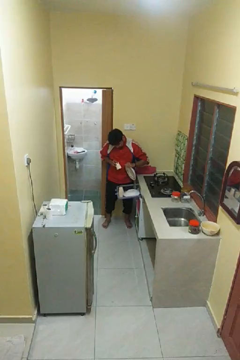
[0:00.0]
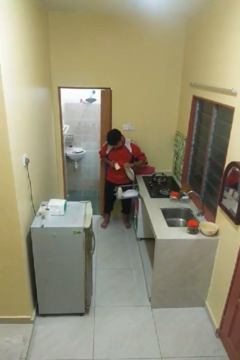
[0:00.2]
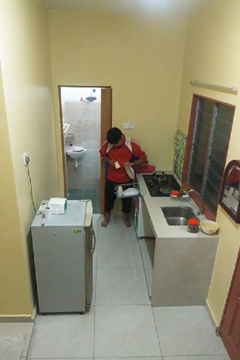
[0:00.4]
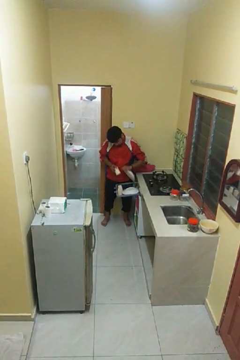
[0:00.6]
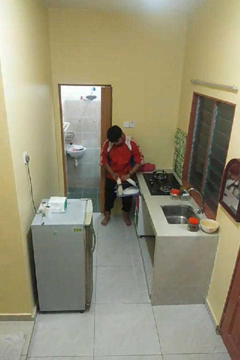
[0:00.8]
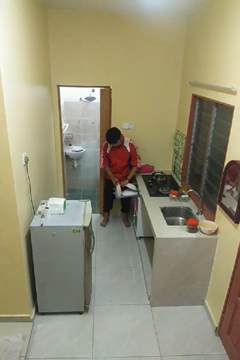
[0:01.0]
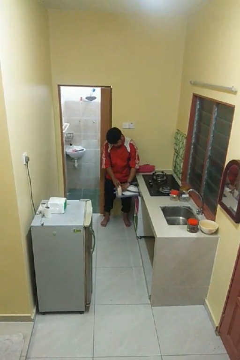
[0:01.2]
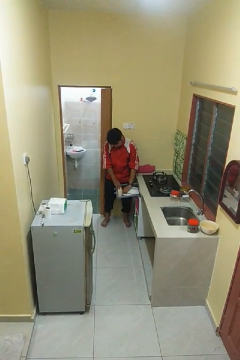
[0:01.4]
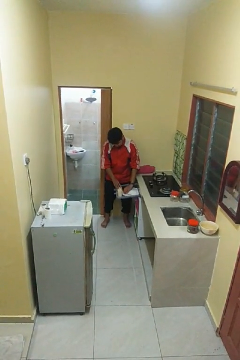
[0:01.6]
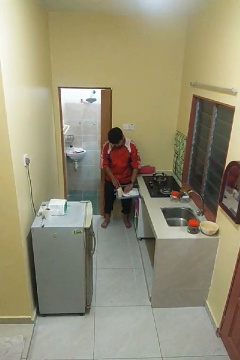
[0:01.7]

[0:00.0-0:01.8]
person puts object into kitchen drawer

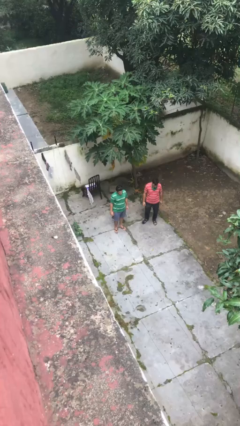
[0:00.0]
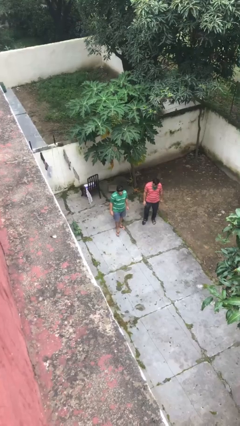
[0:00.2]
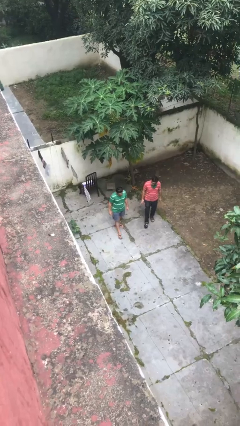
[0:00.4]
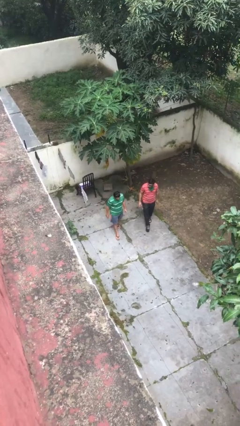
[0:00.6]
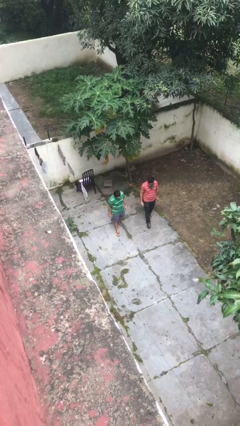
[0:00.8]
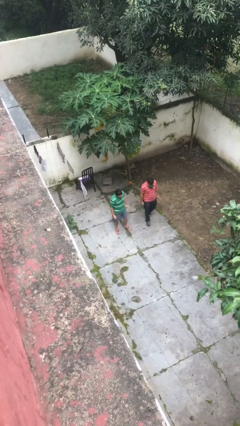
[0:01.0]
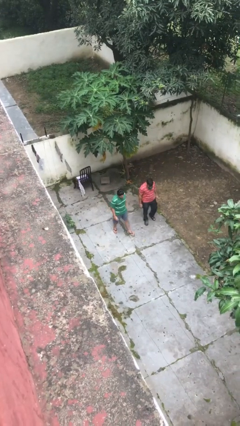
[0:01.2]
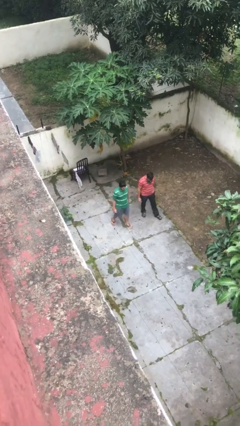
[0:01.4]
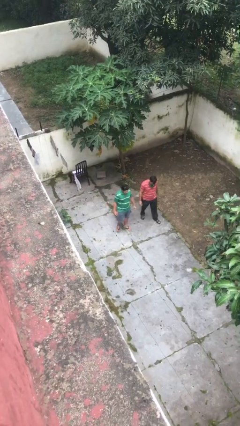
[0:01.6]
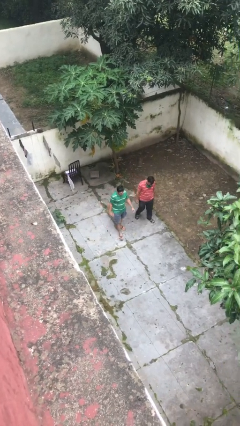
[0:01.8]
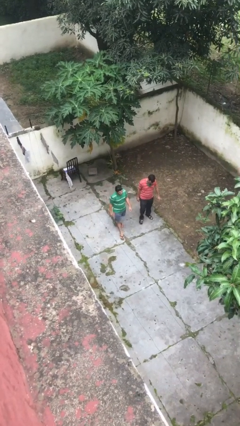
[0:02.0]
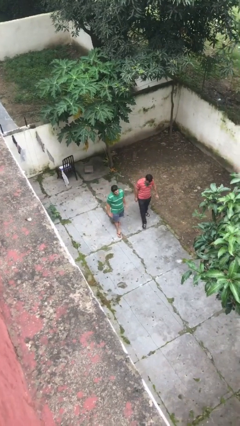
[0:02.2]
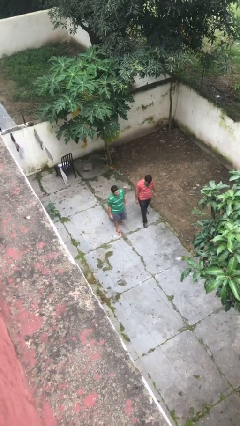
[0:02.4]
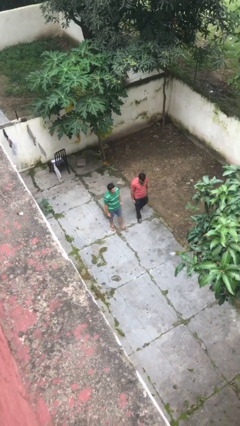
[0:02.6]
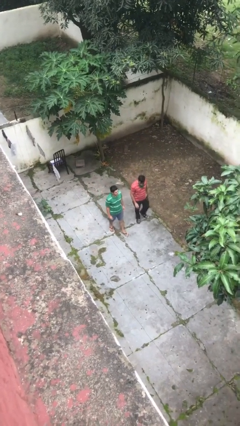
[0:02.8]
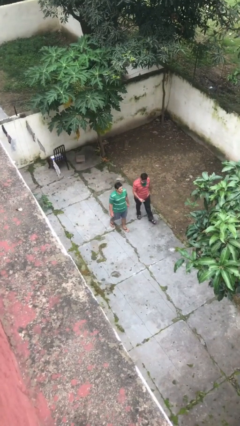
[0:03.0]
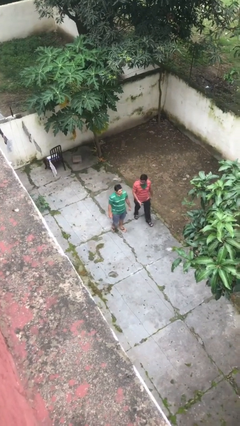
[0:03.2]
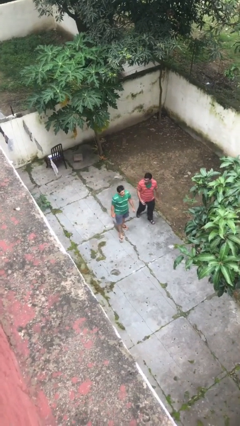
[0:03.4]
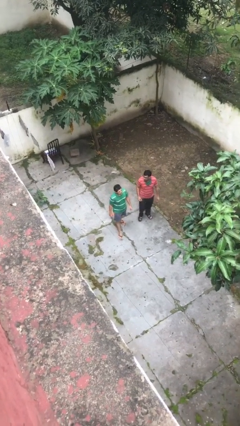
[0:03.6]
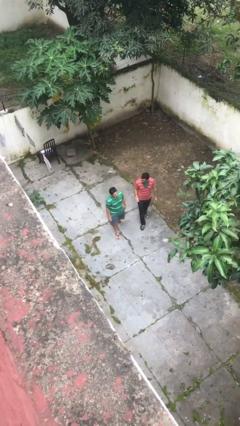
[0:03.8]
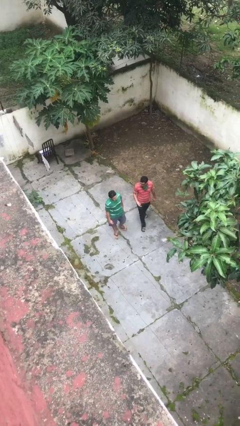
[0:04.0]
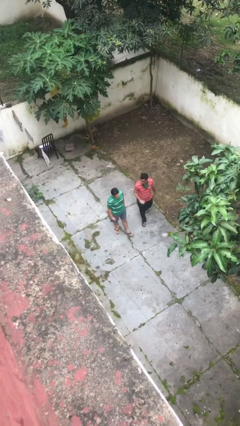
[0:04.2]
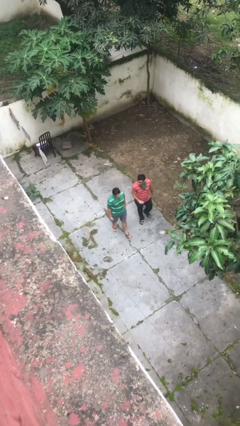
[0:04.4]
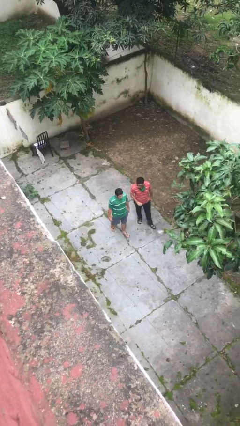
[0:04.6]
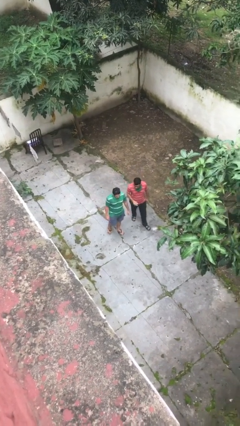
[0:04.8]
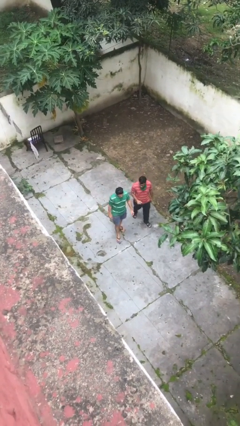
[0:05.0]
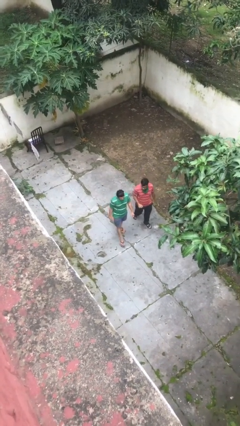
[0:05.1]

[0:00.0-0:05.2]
person talks to person

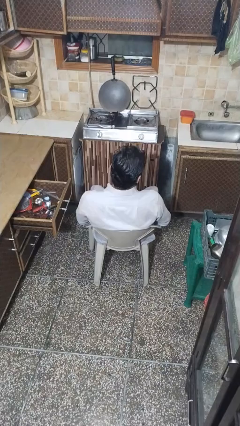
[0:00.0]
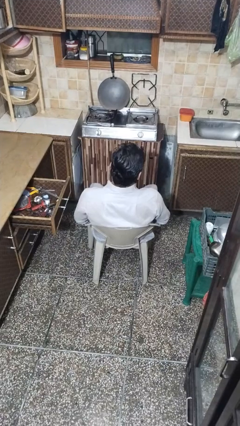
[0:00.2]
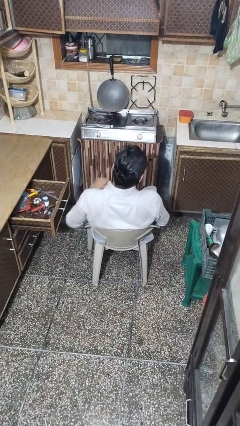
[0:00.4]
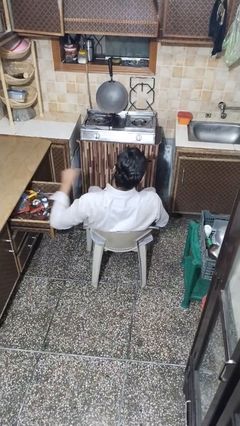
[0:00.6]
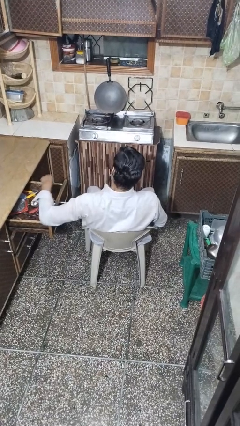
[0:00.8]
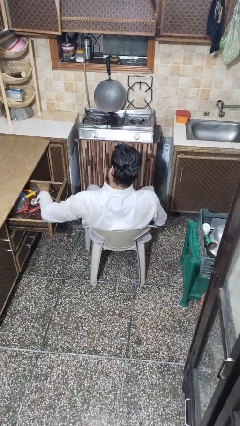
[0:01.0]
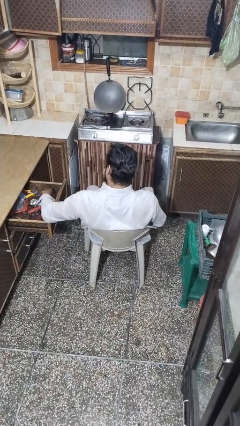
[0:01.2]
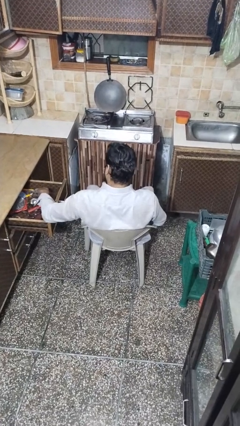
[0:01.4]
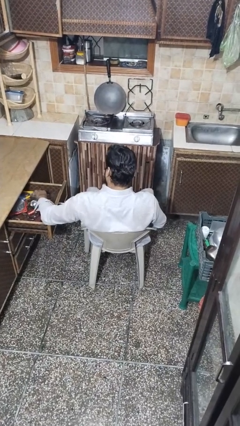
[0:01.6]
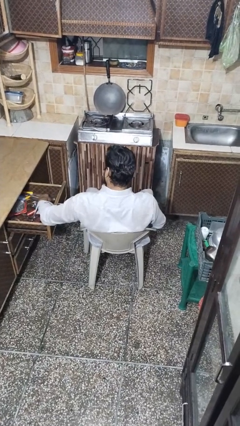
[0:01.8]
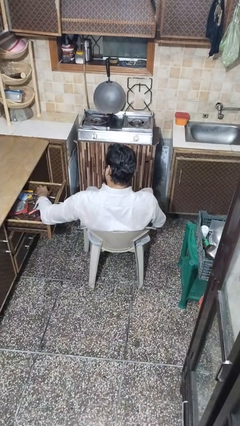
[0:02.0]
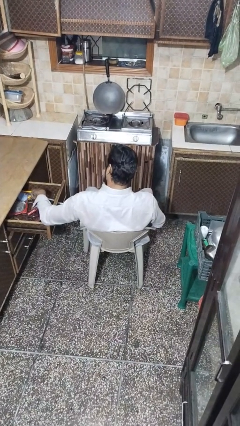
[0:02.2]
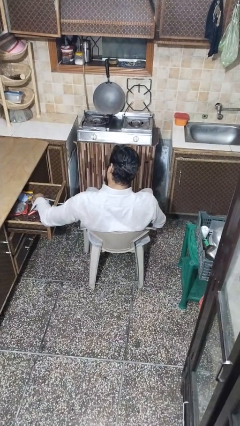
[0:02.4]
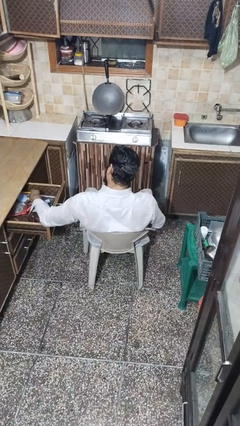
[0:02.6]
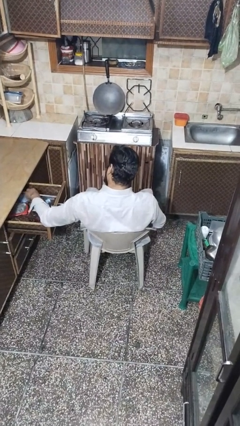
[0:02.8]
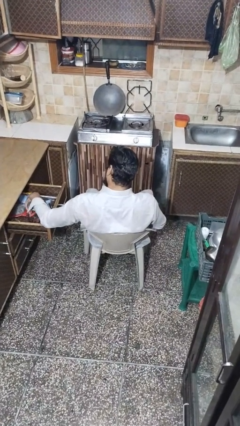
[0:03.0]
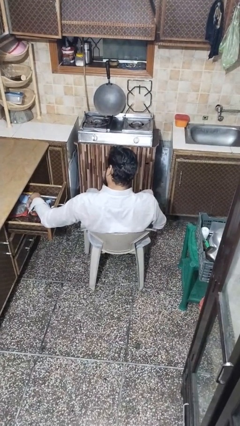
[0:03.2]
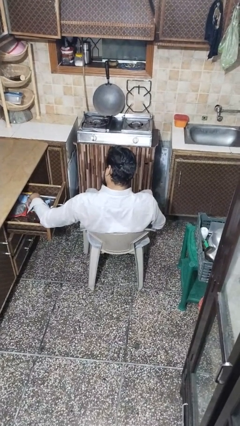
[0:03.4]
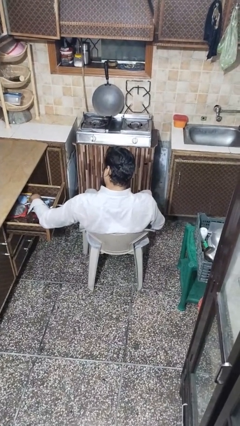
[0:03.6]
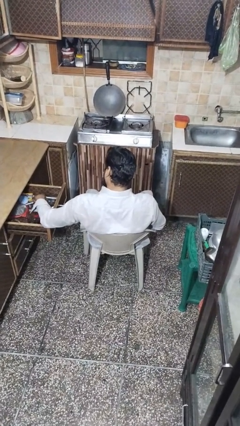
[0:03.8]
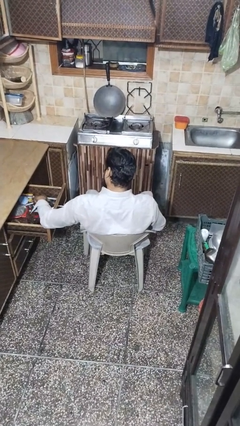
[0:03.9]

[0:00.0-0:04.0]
person searches in kitchen drawer

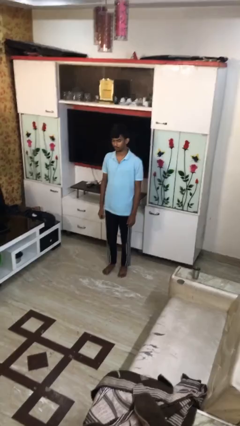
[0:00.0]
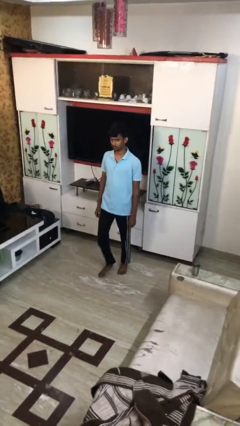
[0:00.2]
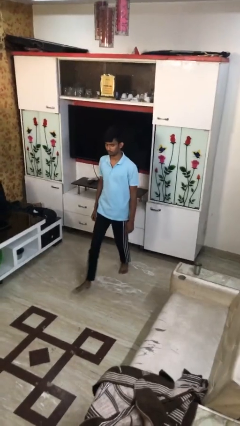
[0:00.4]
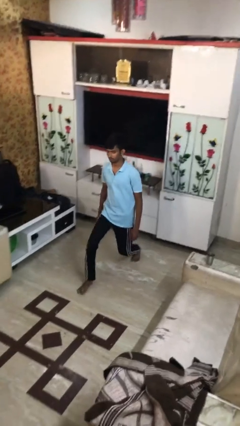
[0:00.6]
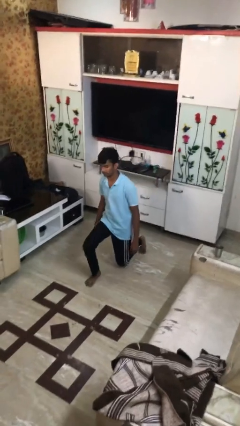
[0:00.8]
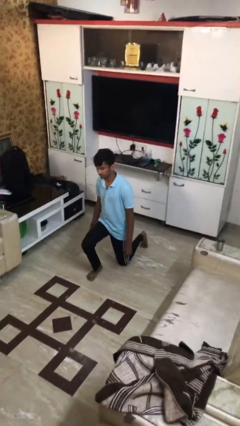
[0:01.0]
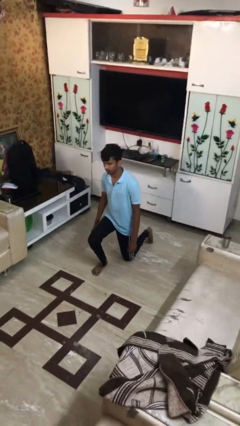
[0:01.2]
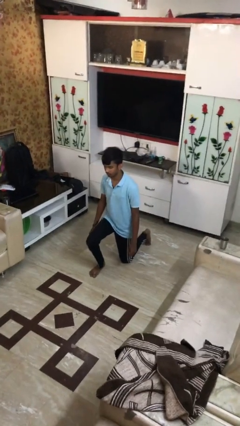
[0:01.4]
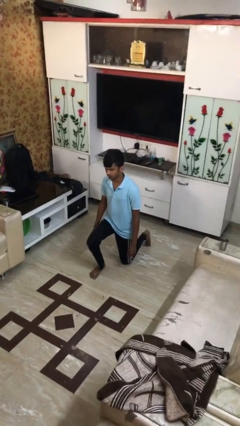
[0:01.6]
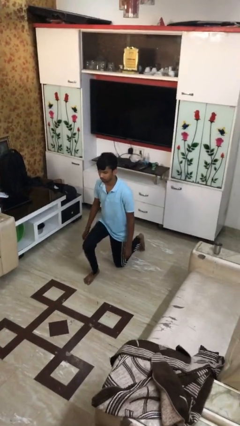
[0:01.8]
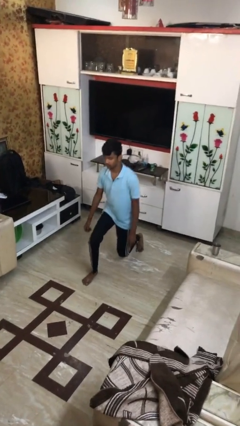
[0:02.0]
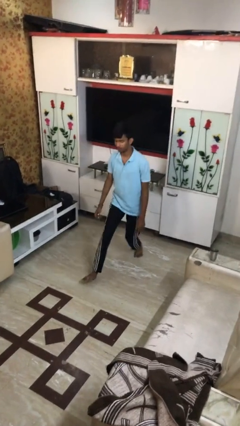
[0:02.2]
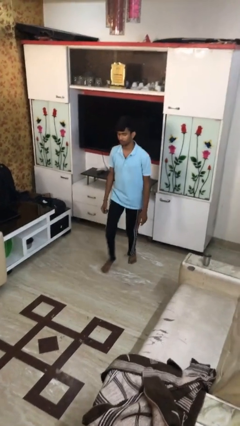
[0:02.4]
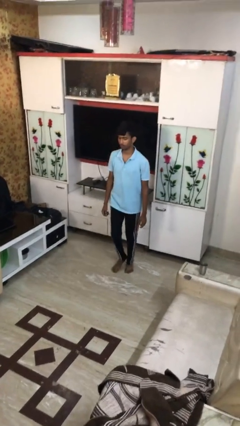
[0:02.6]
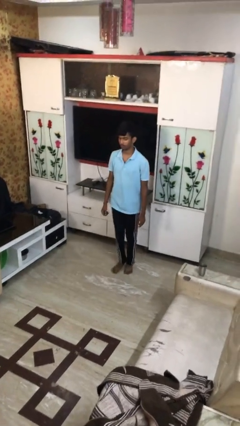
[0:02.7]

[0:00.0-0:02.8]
person exercises with lunges

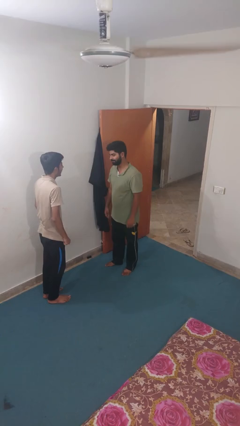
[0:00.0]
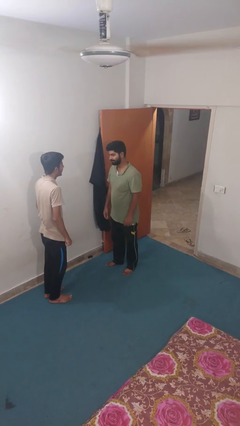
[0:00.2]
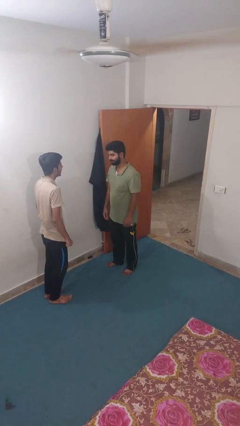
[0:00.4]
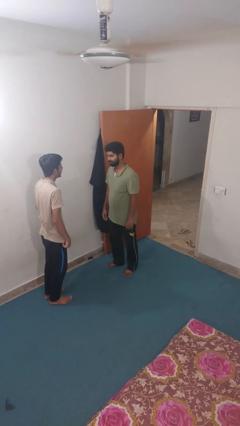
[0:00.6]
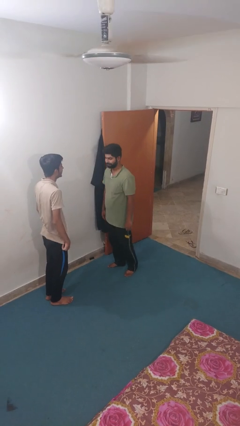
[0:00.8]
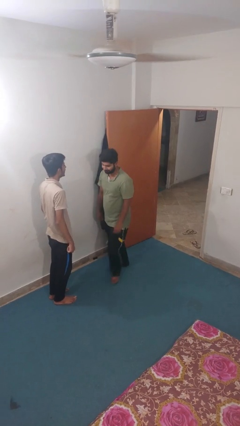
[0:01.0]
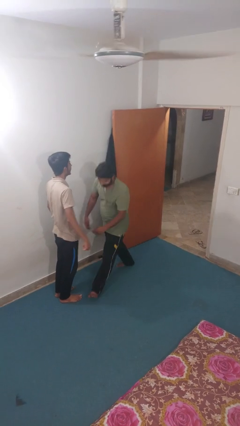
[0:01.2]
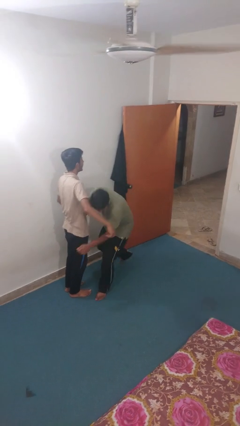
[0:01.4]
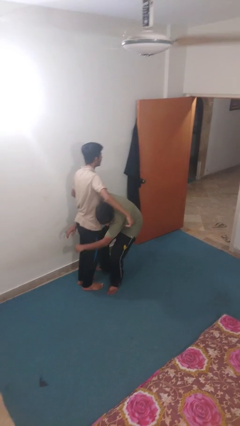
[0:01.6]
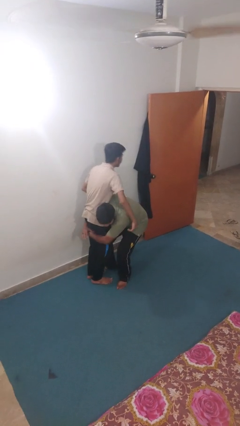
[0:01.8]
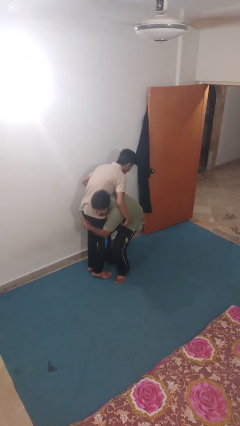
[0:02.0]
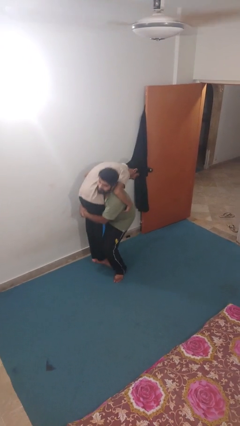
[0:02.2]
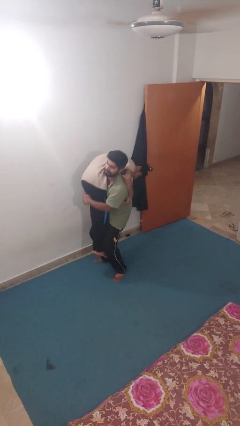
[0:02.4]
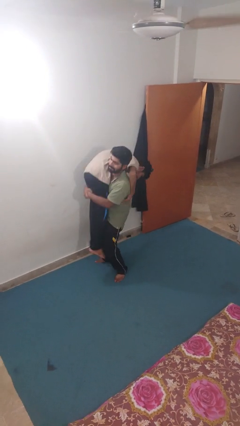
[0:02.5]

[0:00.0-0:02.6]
person carries person over shoulder

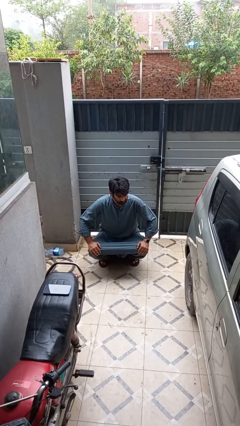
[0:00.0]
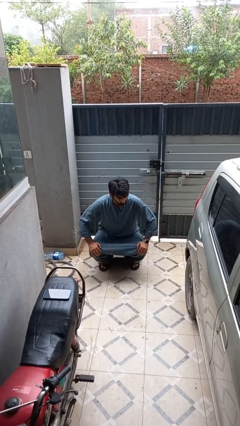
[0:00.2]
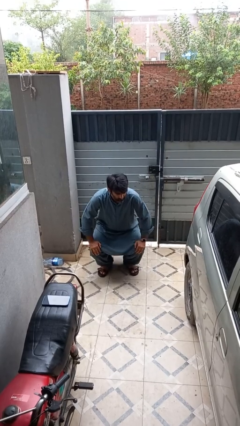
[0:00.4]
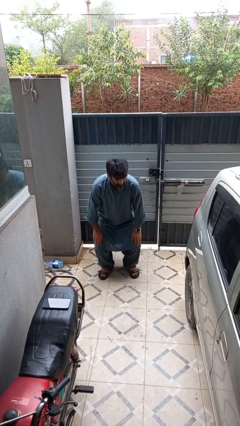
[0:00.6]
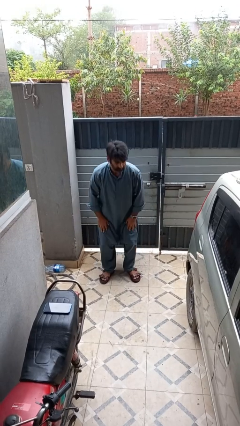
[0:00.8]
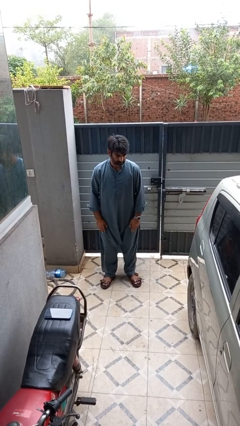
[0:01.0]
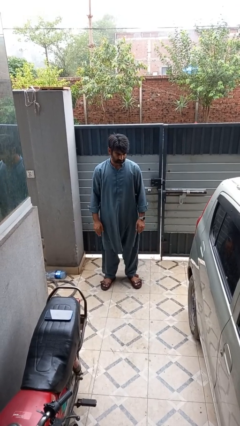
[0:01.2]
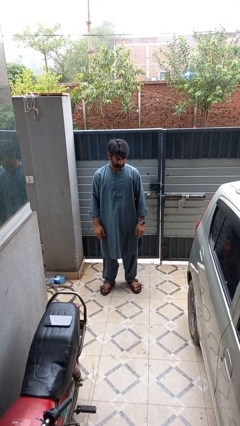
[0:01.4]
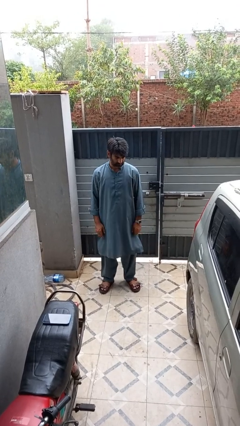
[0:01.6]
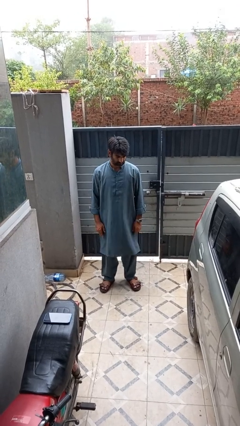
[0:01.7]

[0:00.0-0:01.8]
person stands up
